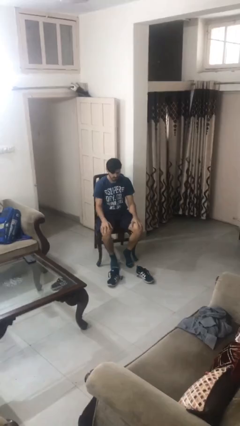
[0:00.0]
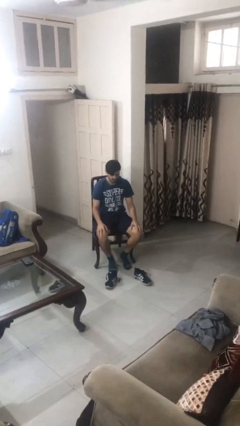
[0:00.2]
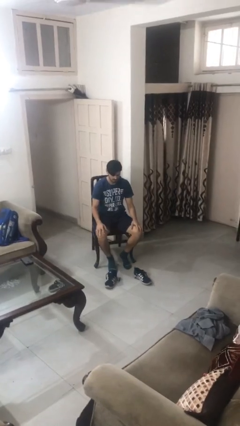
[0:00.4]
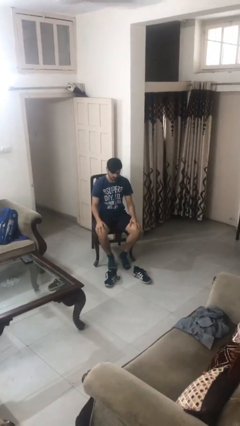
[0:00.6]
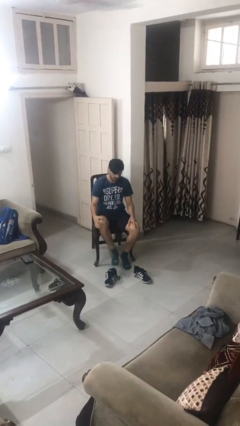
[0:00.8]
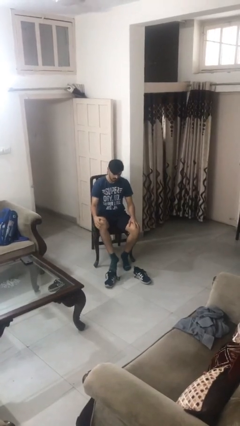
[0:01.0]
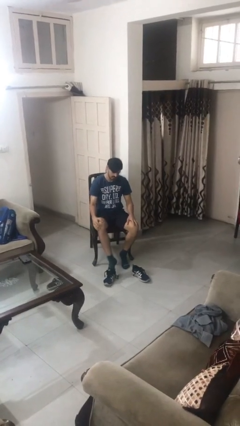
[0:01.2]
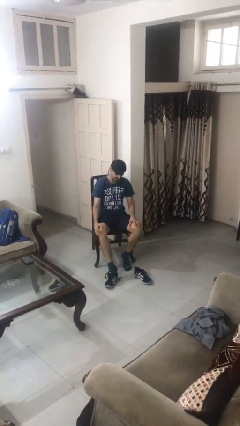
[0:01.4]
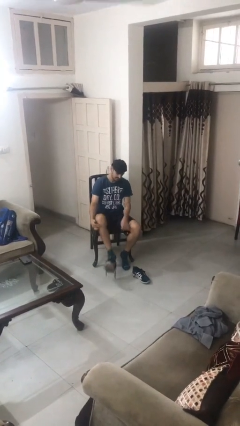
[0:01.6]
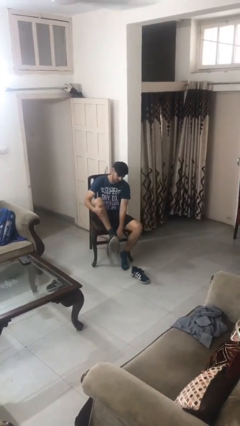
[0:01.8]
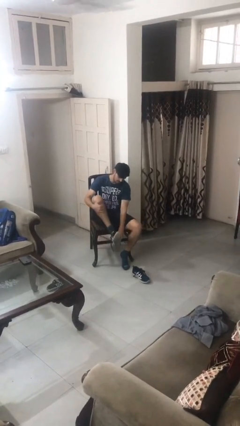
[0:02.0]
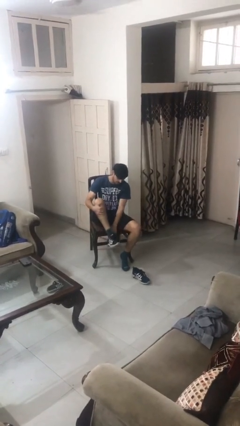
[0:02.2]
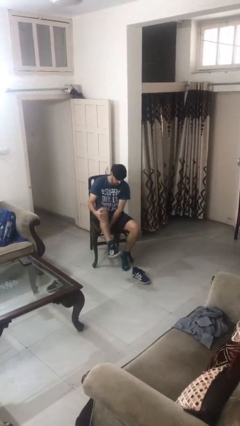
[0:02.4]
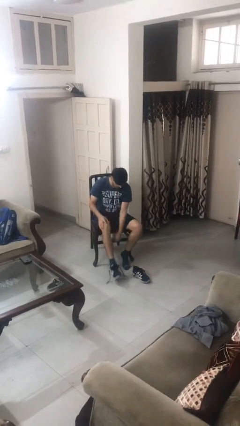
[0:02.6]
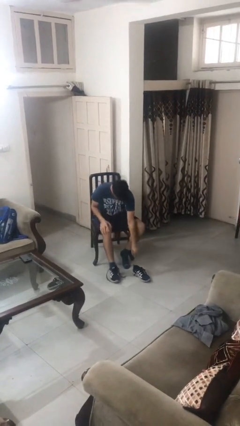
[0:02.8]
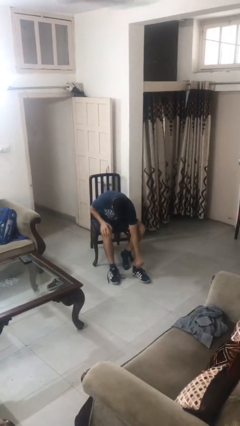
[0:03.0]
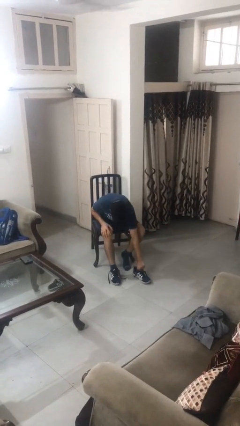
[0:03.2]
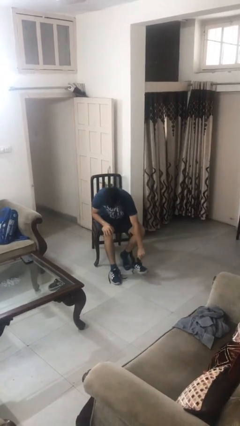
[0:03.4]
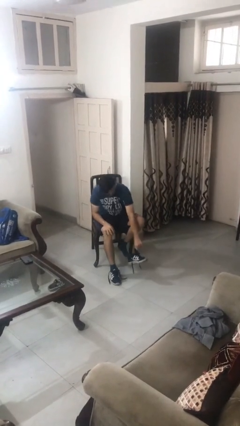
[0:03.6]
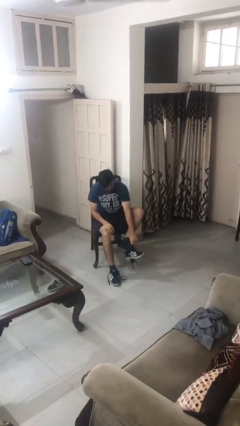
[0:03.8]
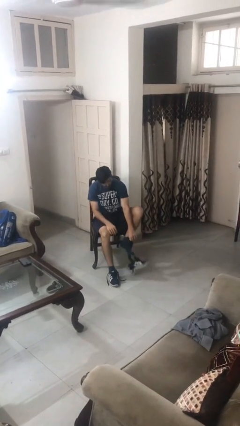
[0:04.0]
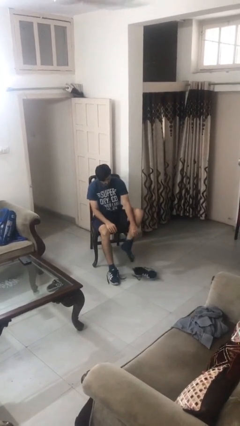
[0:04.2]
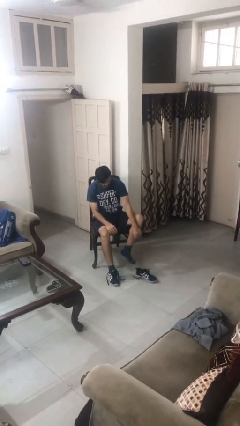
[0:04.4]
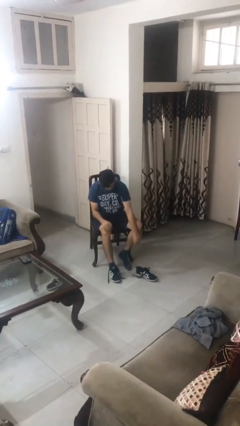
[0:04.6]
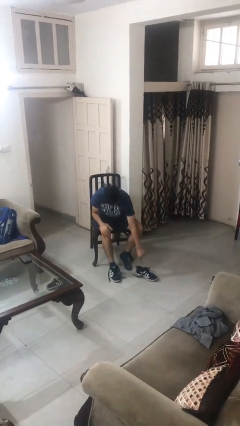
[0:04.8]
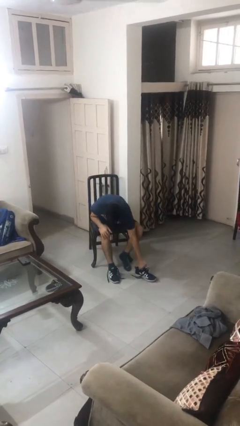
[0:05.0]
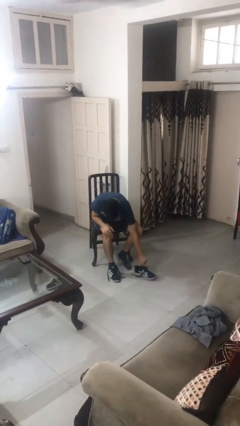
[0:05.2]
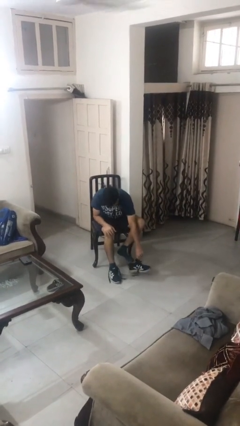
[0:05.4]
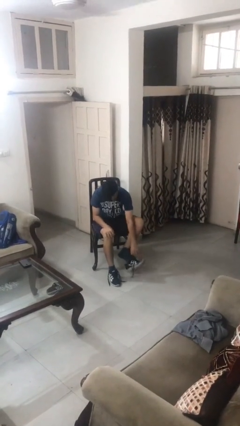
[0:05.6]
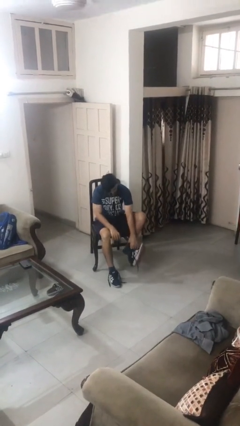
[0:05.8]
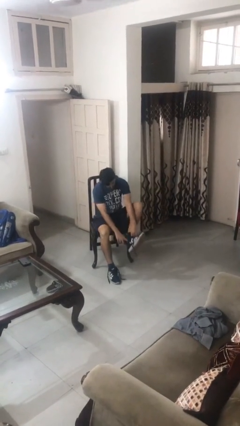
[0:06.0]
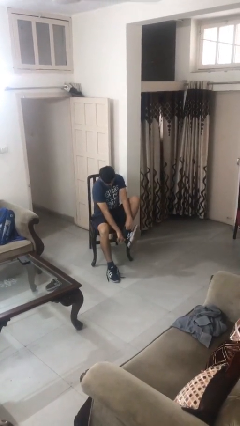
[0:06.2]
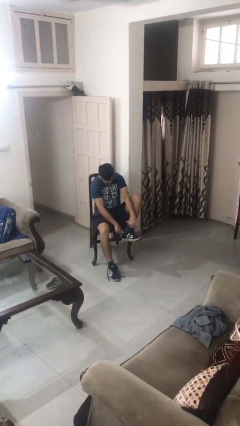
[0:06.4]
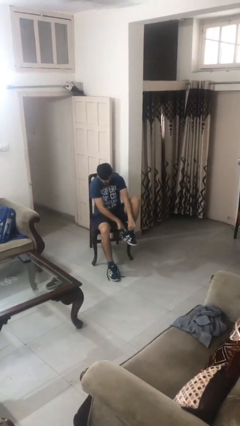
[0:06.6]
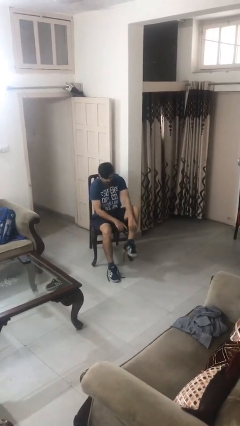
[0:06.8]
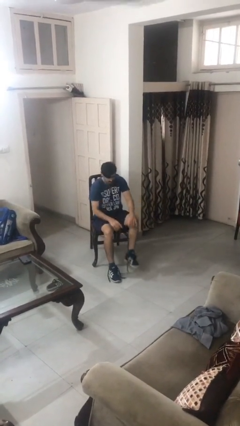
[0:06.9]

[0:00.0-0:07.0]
person puts on shoes

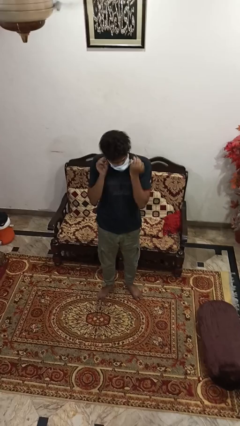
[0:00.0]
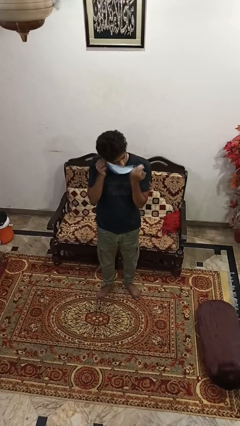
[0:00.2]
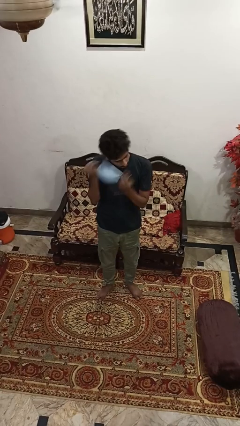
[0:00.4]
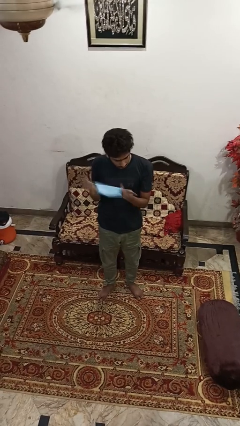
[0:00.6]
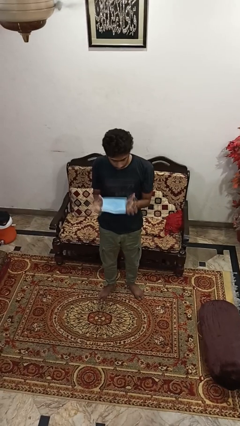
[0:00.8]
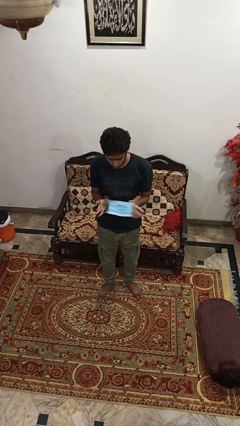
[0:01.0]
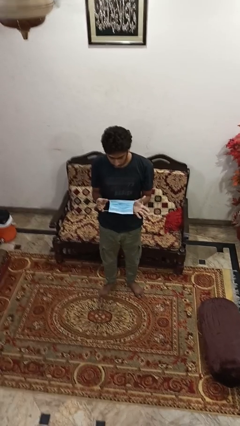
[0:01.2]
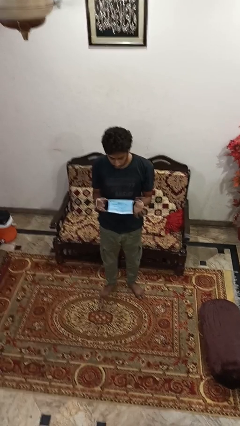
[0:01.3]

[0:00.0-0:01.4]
person takes off facemask

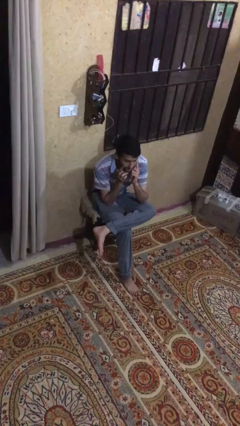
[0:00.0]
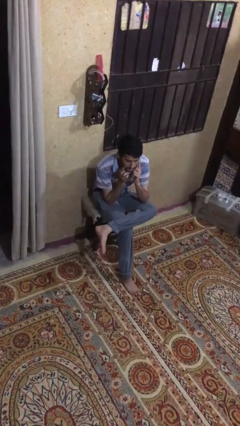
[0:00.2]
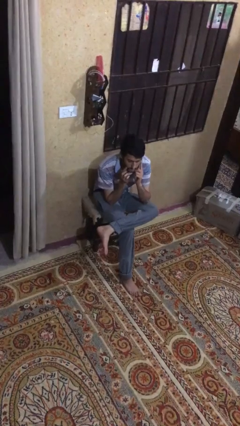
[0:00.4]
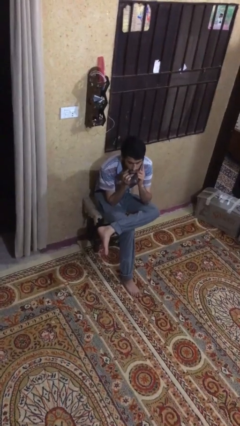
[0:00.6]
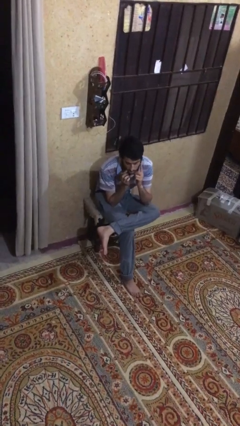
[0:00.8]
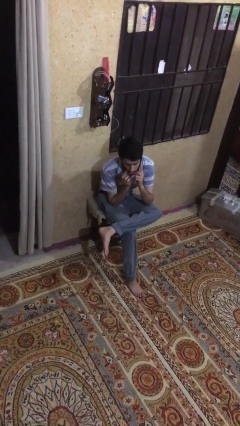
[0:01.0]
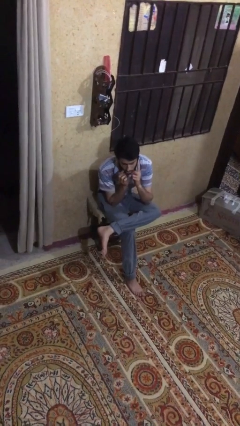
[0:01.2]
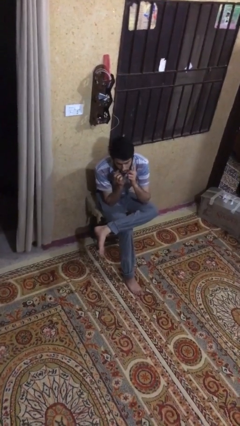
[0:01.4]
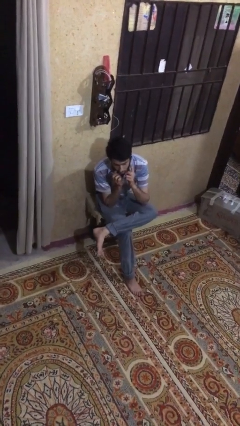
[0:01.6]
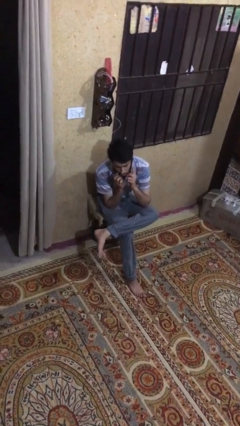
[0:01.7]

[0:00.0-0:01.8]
person talks on phone

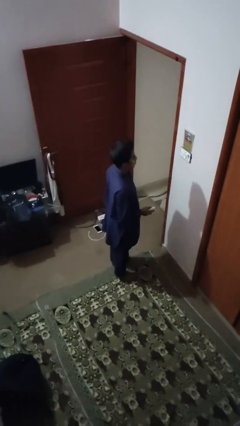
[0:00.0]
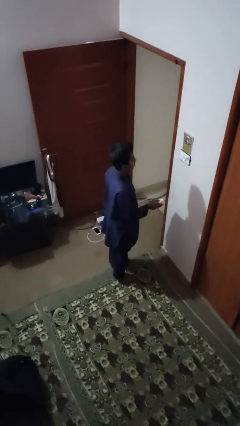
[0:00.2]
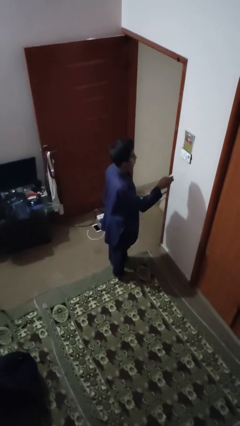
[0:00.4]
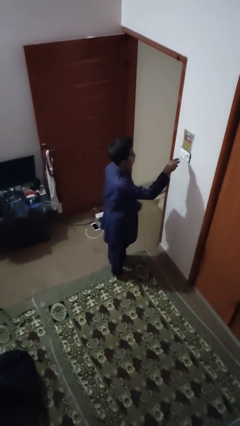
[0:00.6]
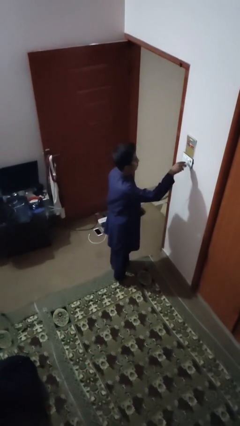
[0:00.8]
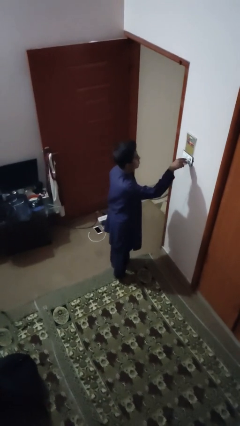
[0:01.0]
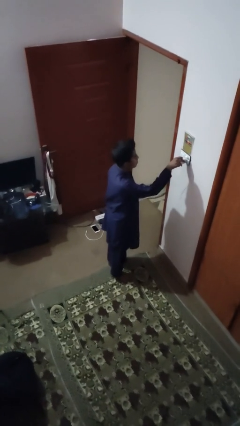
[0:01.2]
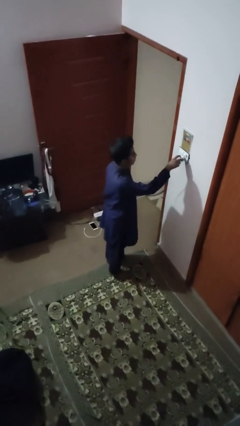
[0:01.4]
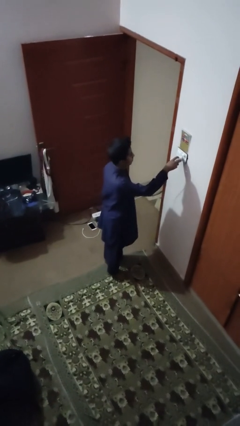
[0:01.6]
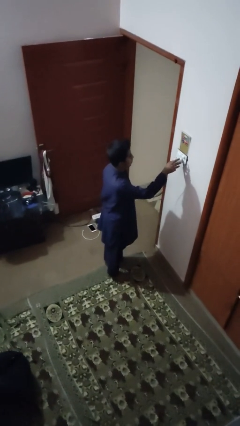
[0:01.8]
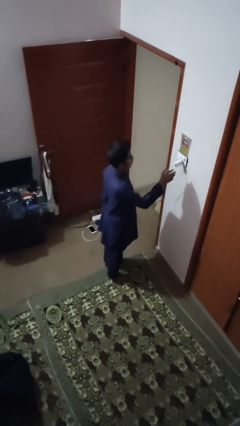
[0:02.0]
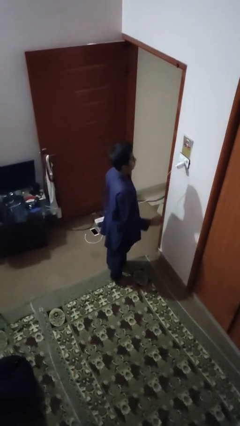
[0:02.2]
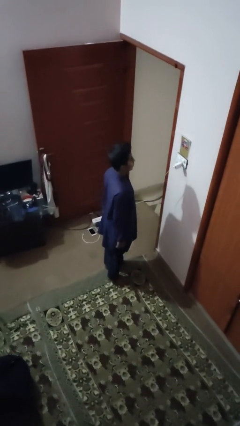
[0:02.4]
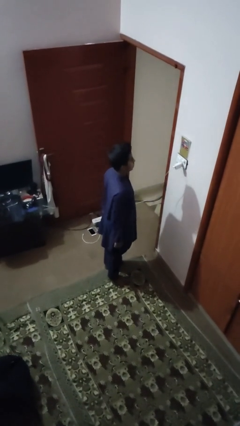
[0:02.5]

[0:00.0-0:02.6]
person plugs into electrical socket

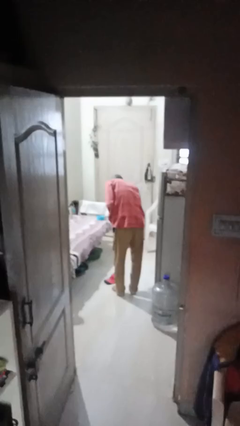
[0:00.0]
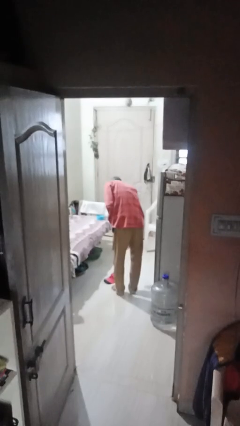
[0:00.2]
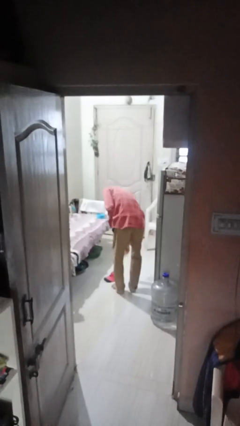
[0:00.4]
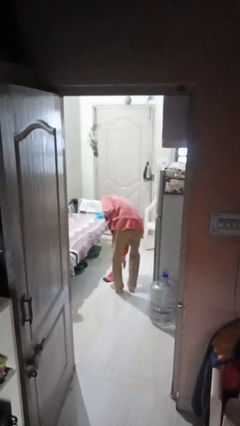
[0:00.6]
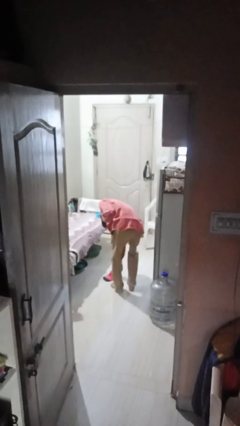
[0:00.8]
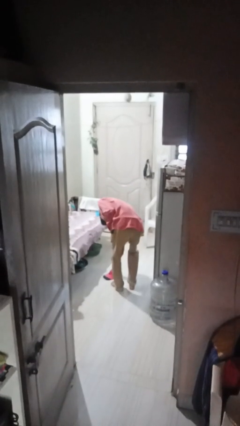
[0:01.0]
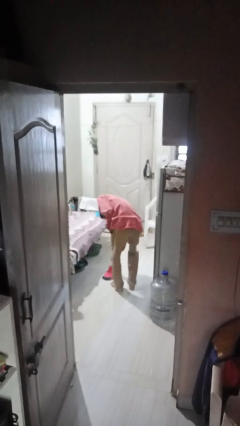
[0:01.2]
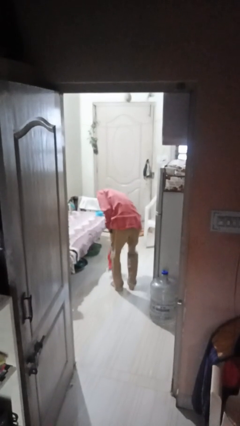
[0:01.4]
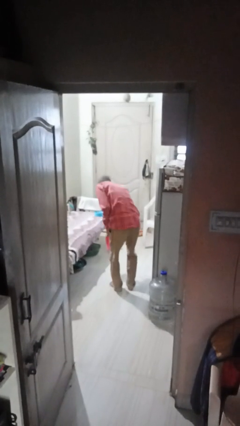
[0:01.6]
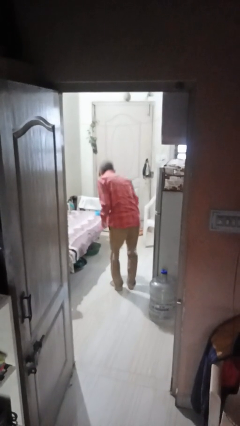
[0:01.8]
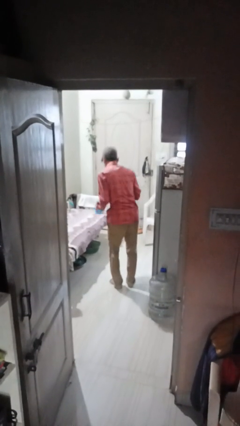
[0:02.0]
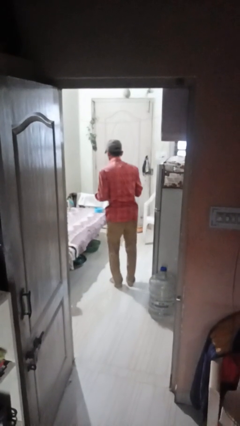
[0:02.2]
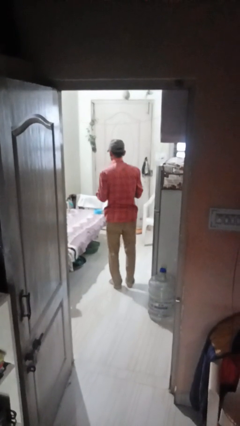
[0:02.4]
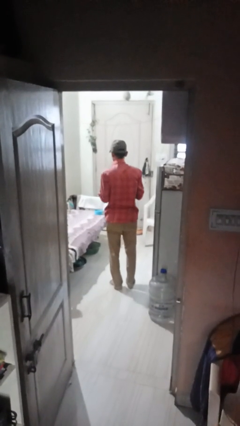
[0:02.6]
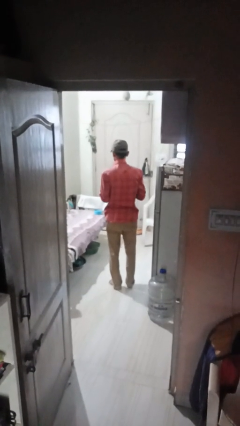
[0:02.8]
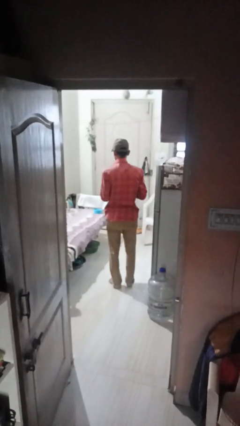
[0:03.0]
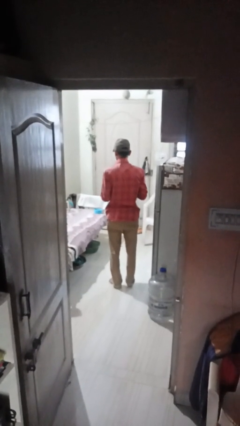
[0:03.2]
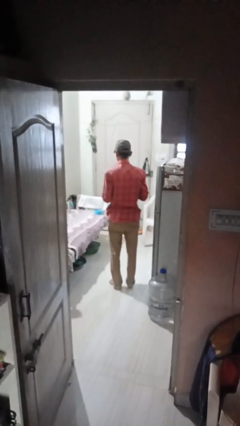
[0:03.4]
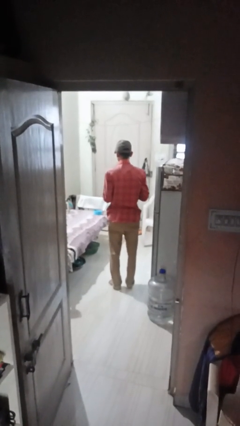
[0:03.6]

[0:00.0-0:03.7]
person picks up object from floor

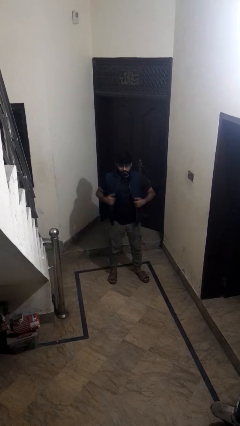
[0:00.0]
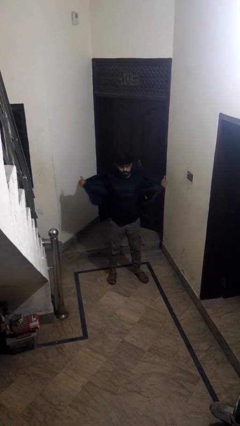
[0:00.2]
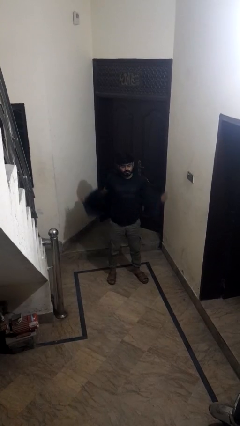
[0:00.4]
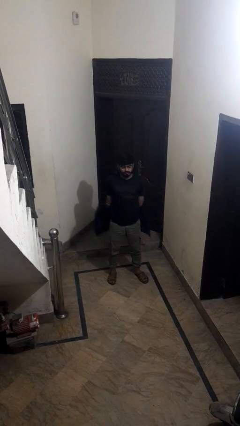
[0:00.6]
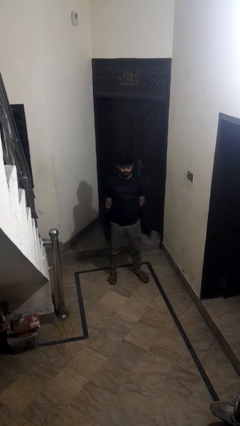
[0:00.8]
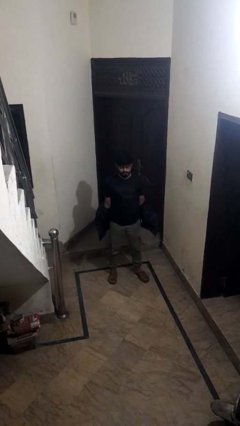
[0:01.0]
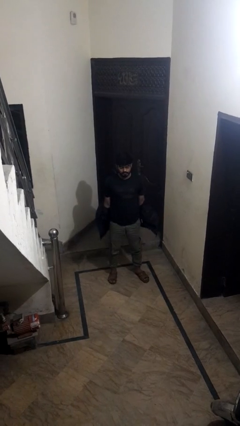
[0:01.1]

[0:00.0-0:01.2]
person takes off jacket
